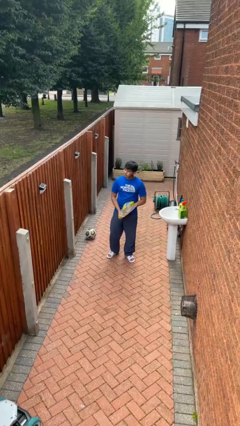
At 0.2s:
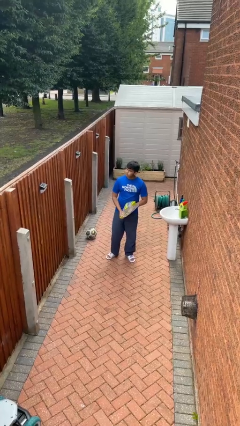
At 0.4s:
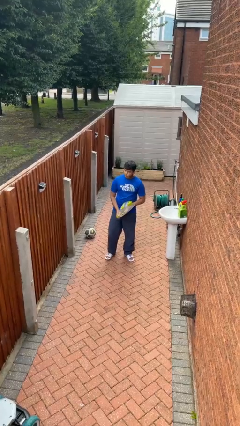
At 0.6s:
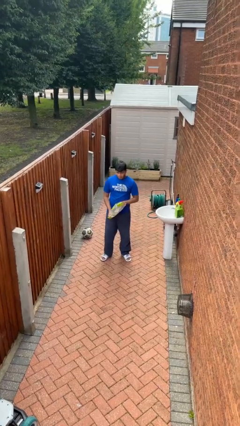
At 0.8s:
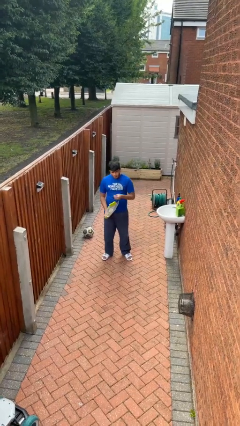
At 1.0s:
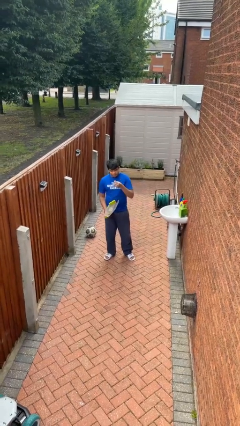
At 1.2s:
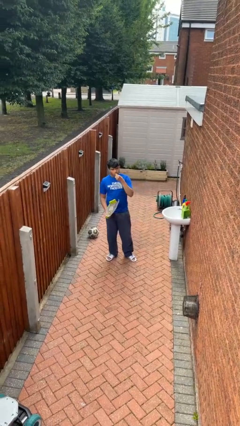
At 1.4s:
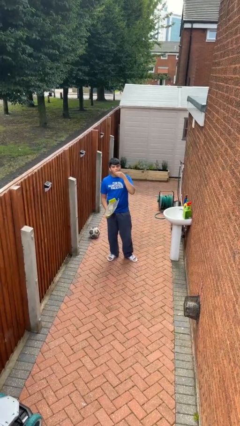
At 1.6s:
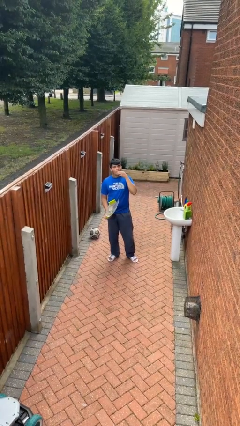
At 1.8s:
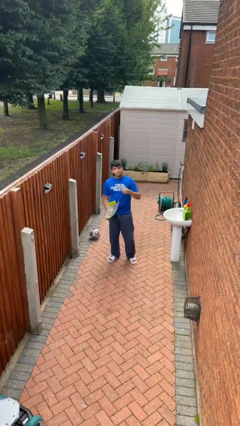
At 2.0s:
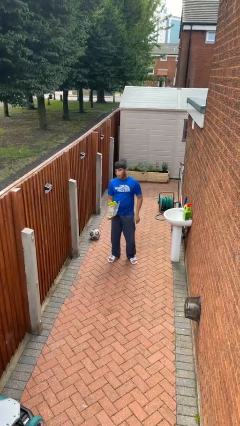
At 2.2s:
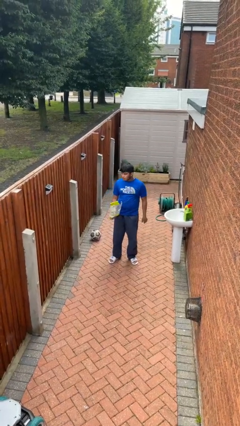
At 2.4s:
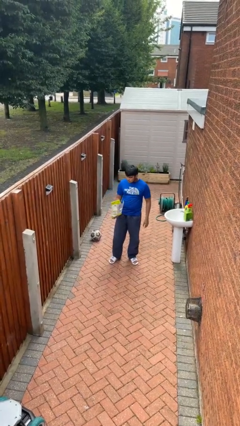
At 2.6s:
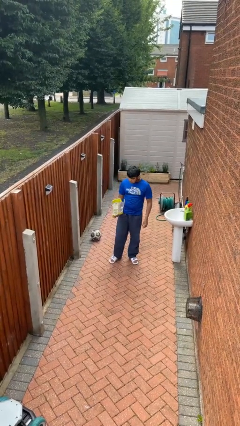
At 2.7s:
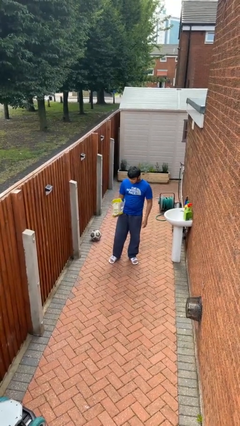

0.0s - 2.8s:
person eats snack from bag

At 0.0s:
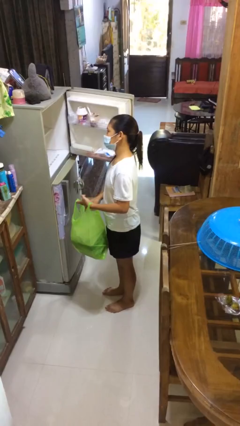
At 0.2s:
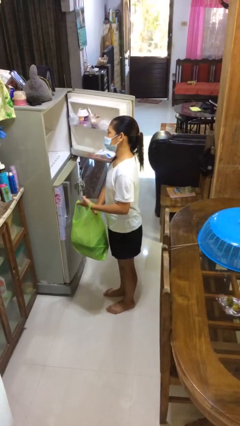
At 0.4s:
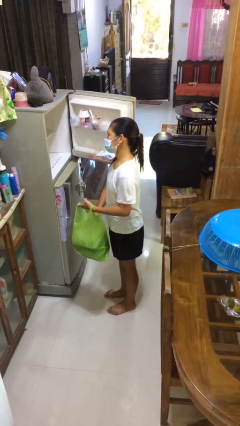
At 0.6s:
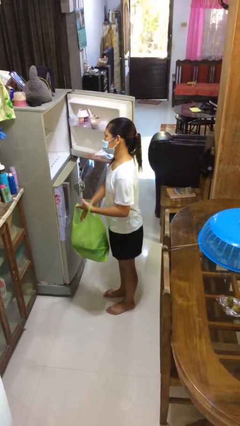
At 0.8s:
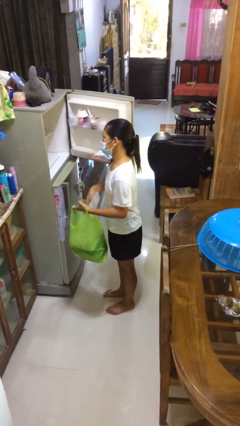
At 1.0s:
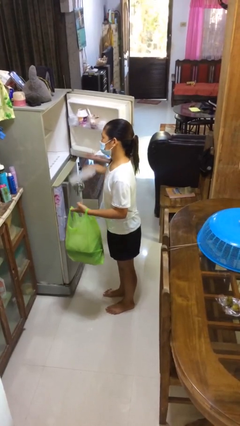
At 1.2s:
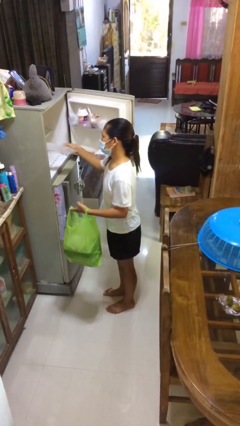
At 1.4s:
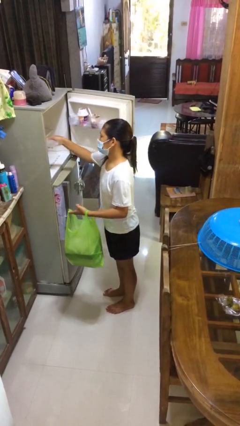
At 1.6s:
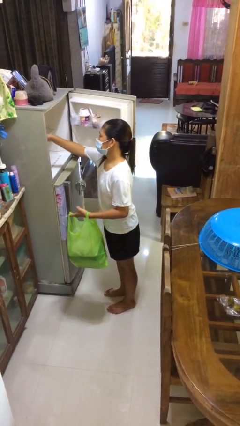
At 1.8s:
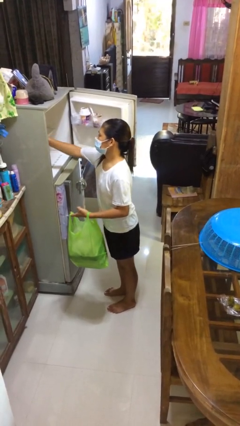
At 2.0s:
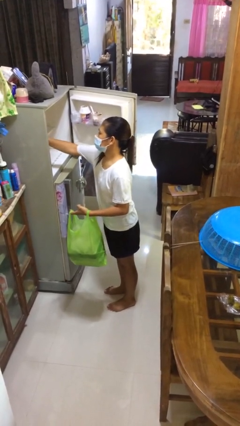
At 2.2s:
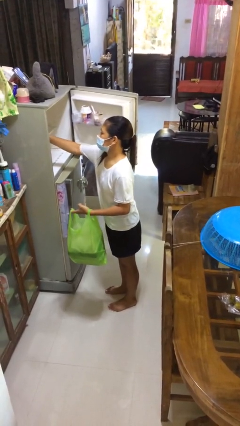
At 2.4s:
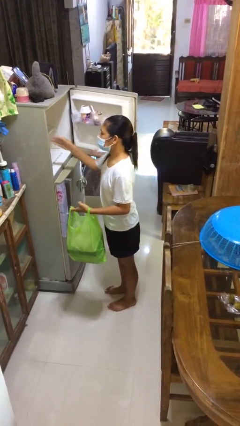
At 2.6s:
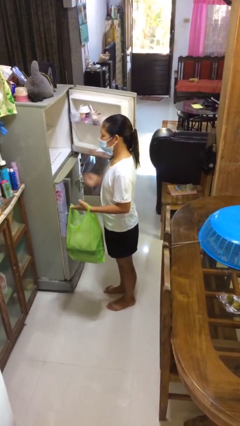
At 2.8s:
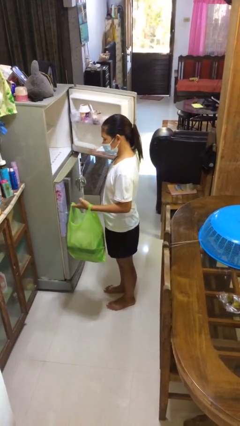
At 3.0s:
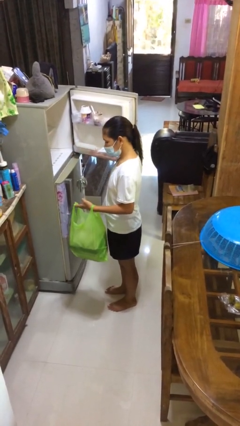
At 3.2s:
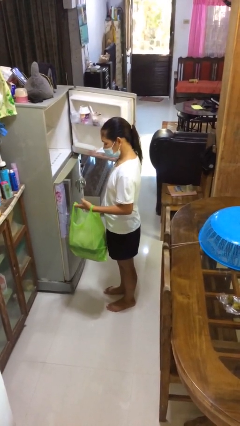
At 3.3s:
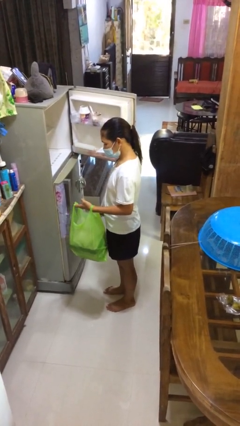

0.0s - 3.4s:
person loads groceries into refrigerator

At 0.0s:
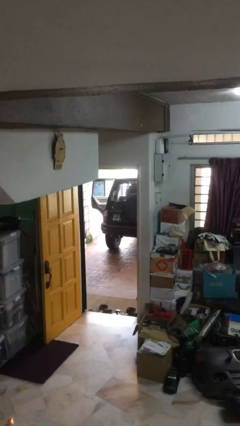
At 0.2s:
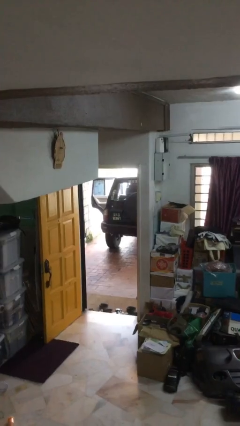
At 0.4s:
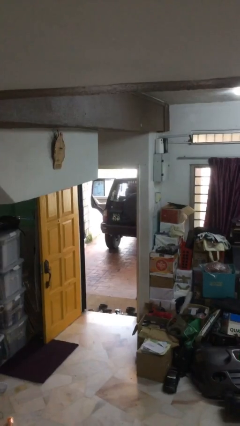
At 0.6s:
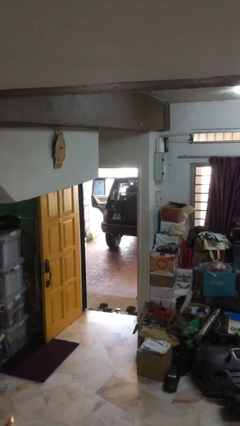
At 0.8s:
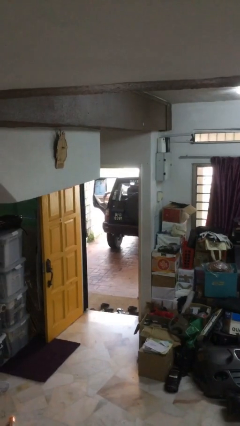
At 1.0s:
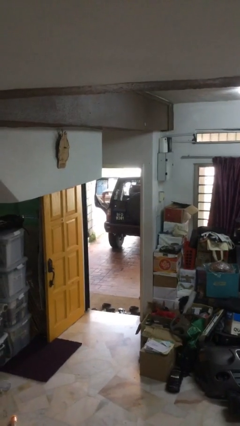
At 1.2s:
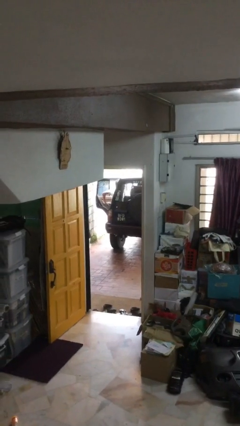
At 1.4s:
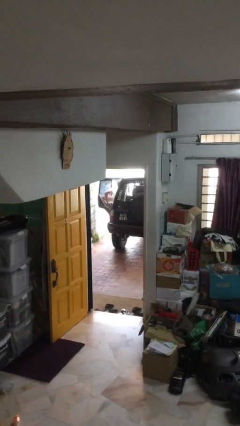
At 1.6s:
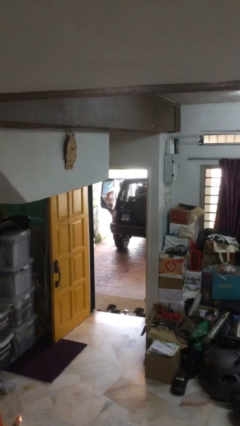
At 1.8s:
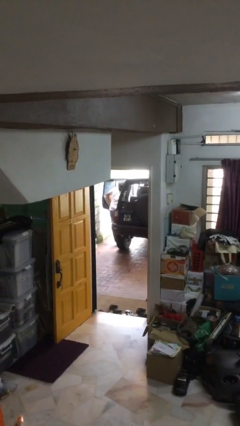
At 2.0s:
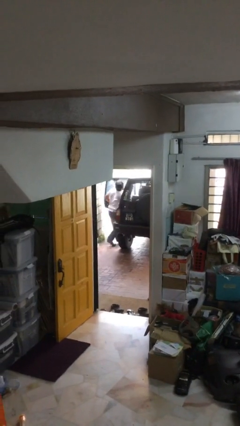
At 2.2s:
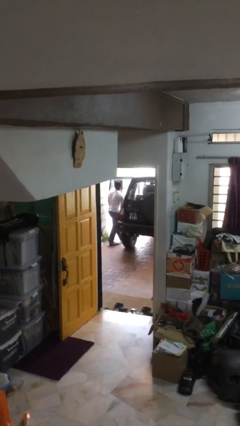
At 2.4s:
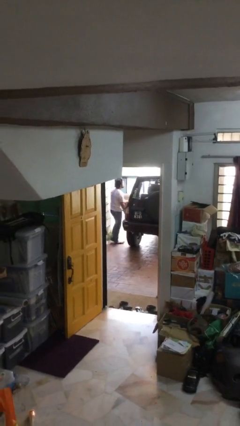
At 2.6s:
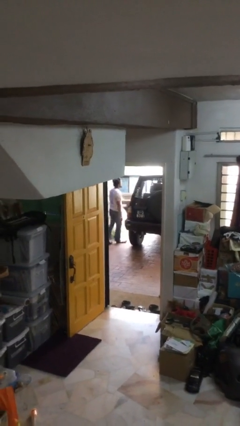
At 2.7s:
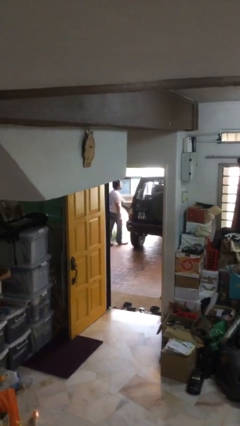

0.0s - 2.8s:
person exits car

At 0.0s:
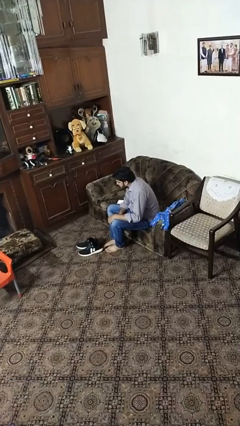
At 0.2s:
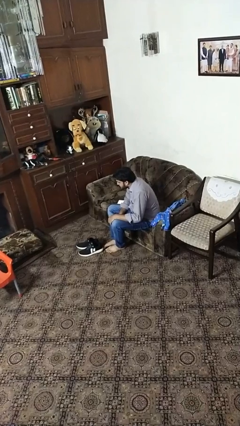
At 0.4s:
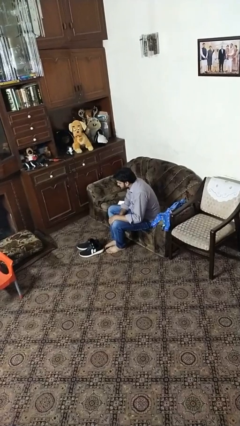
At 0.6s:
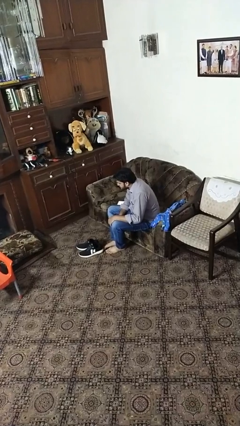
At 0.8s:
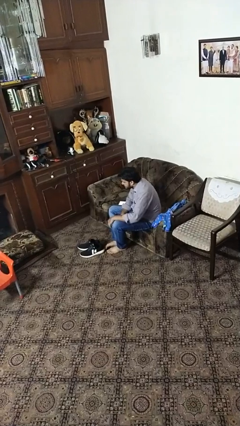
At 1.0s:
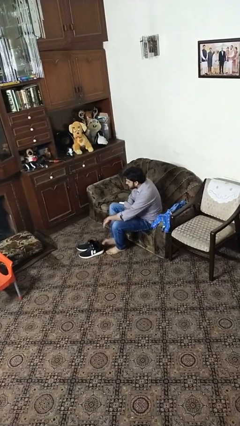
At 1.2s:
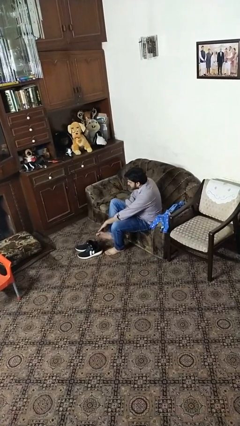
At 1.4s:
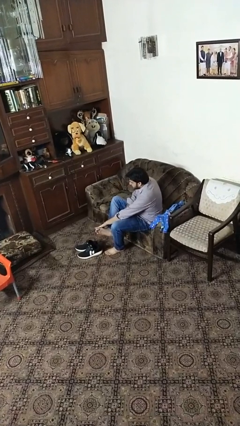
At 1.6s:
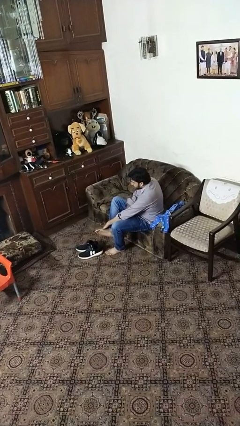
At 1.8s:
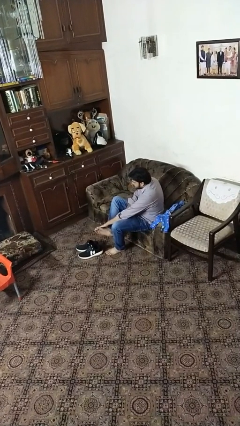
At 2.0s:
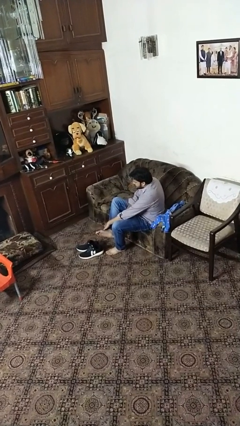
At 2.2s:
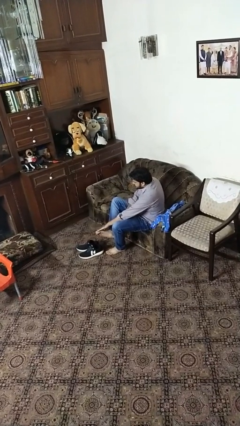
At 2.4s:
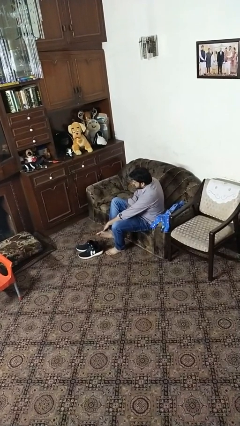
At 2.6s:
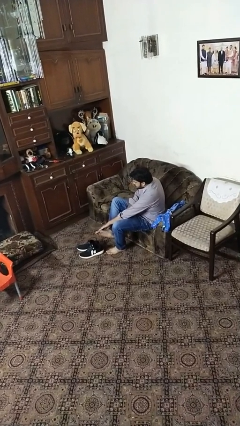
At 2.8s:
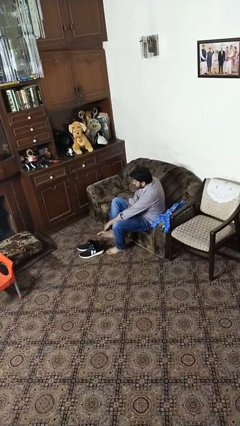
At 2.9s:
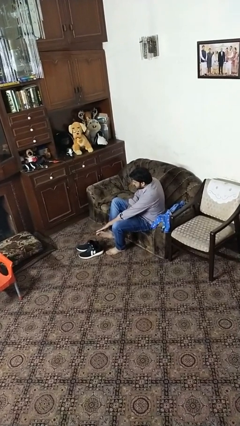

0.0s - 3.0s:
person rubs foot

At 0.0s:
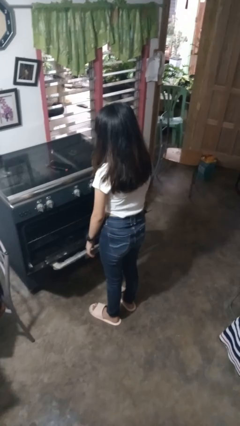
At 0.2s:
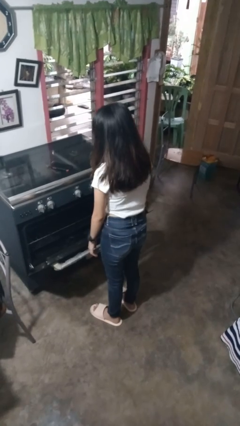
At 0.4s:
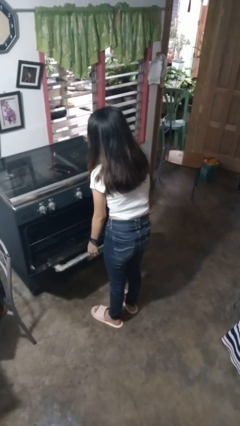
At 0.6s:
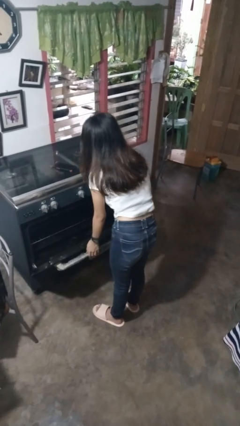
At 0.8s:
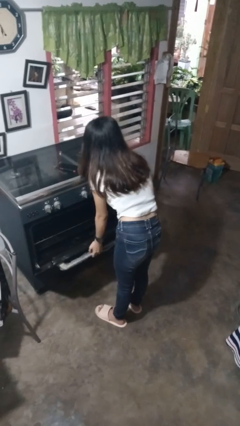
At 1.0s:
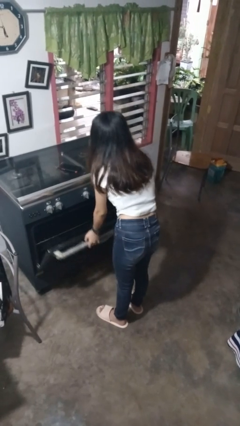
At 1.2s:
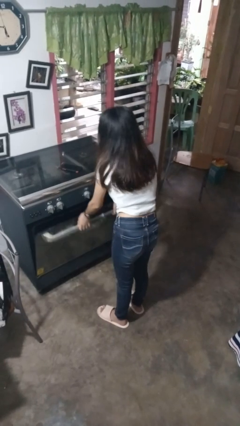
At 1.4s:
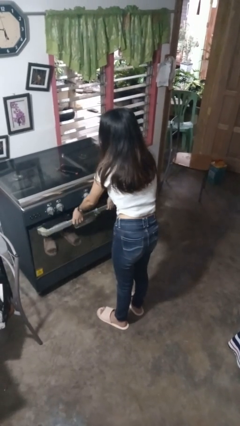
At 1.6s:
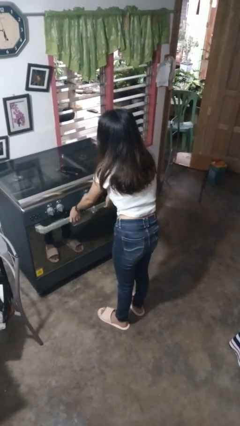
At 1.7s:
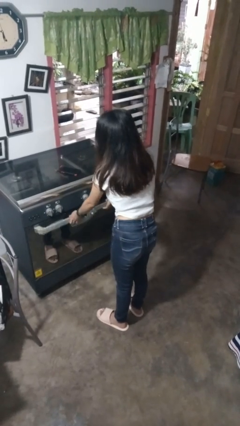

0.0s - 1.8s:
person closes oven door

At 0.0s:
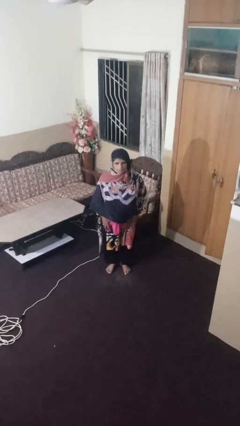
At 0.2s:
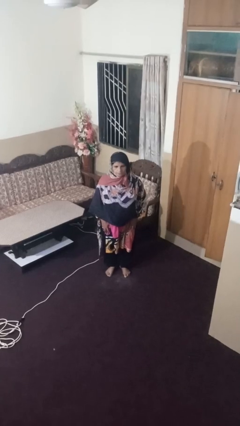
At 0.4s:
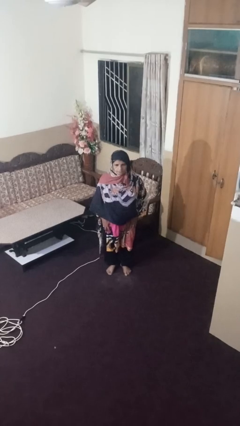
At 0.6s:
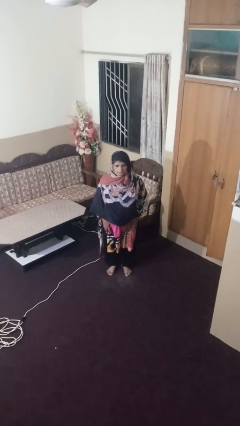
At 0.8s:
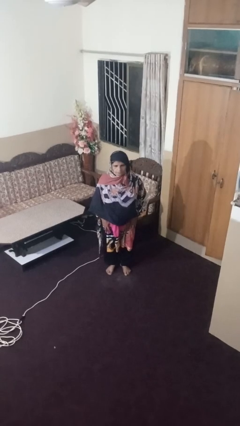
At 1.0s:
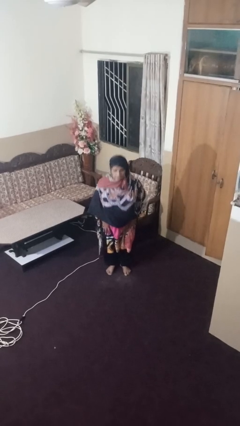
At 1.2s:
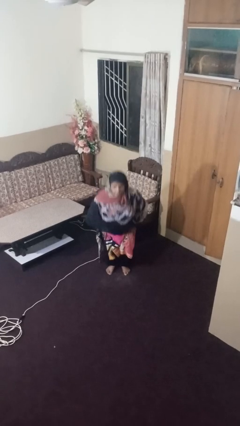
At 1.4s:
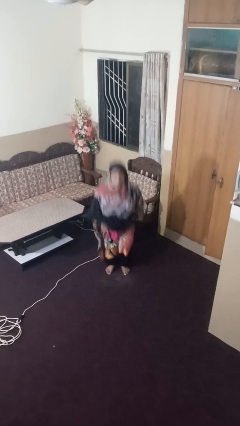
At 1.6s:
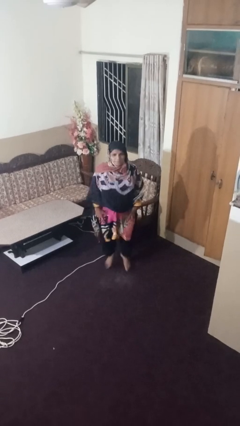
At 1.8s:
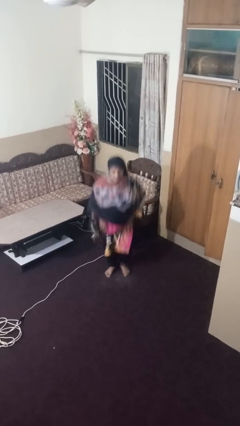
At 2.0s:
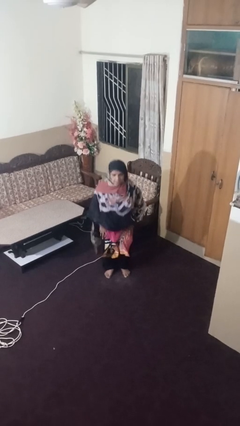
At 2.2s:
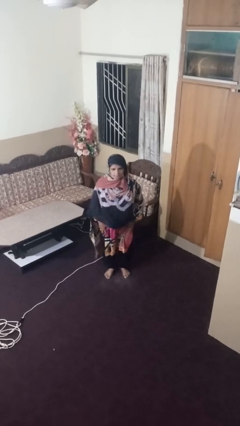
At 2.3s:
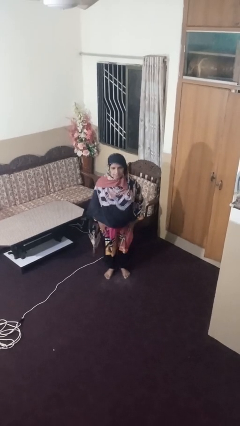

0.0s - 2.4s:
person jumps

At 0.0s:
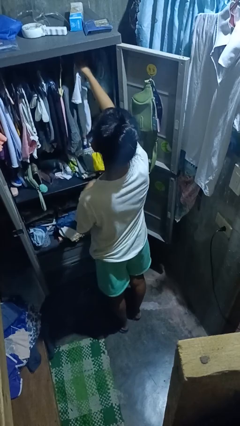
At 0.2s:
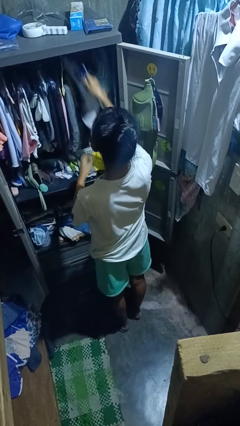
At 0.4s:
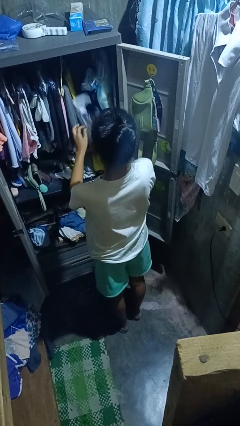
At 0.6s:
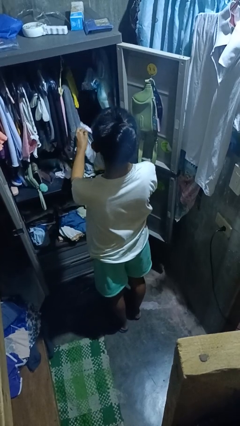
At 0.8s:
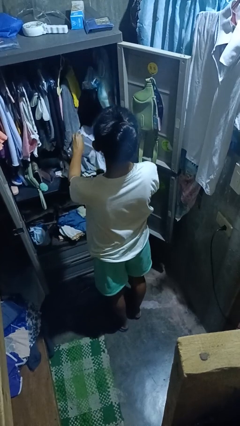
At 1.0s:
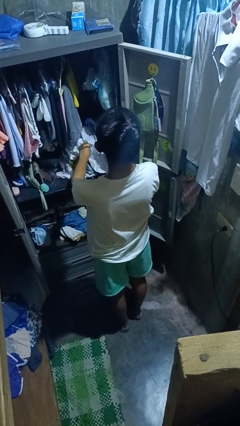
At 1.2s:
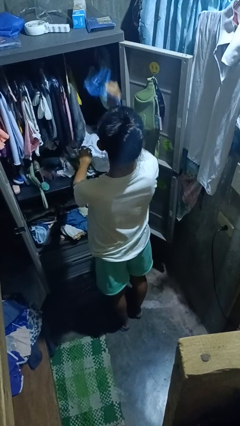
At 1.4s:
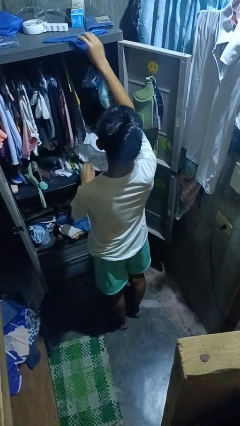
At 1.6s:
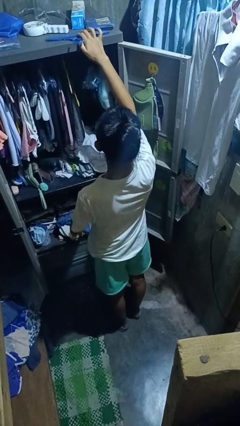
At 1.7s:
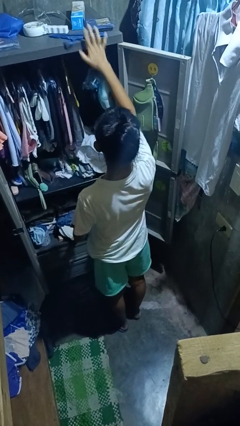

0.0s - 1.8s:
person takes clothes from closet
